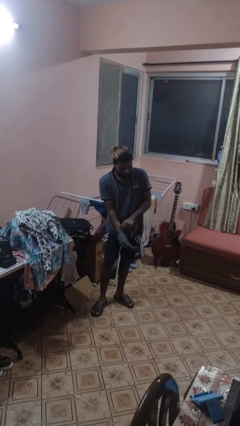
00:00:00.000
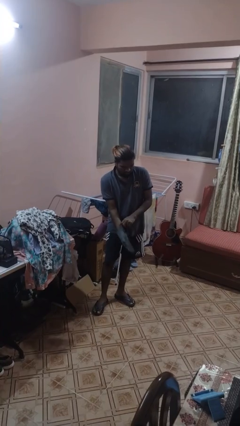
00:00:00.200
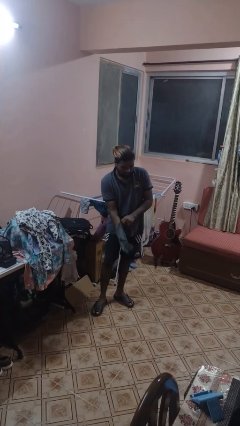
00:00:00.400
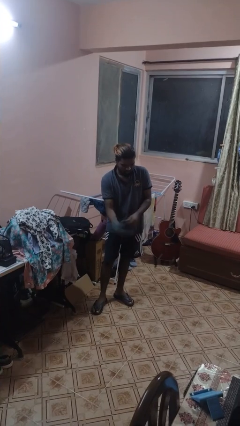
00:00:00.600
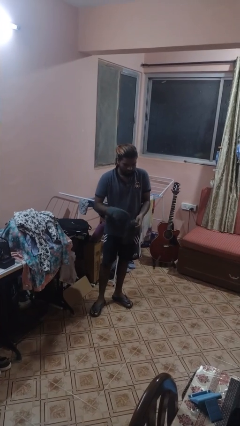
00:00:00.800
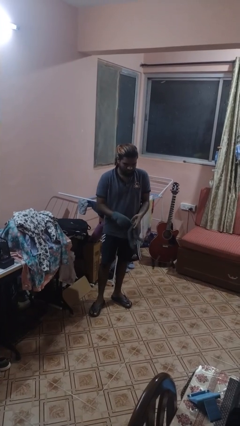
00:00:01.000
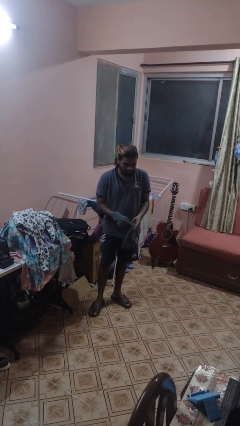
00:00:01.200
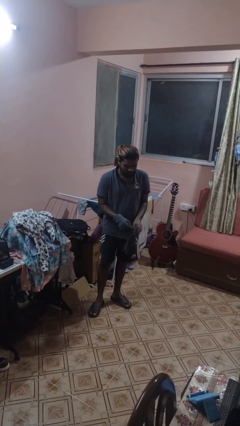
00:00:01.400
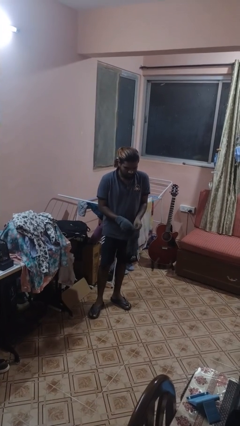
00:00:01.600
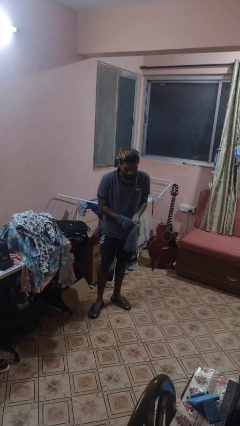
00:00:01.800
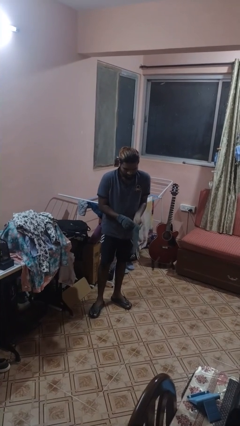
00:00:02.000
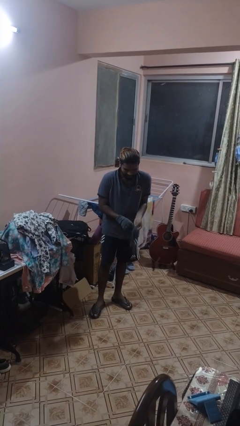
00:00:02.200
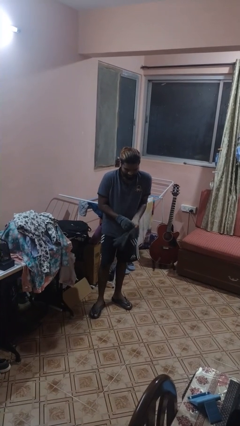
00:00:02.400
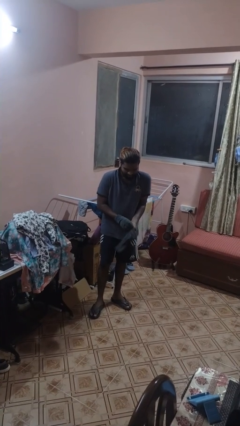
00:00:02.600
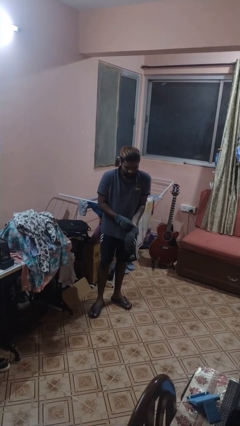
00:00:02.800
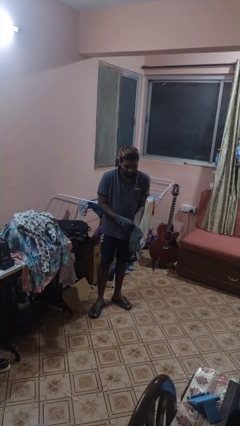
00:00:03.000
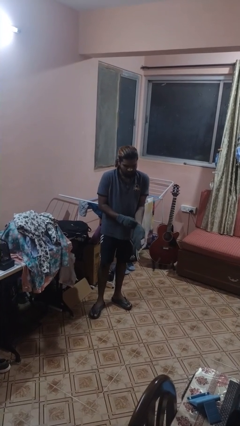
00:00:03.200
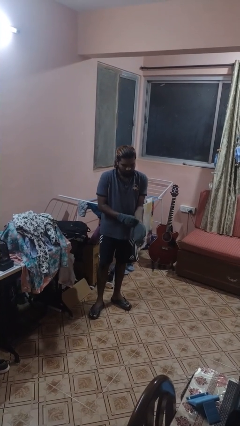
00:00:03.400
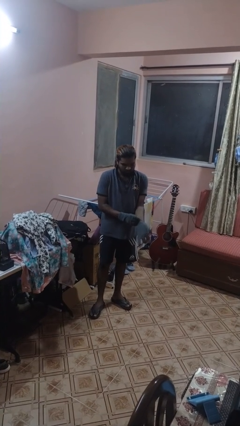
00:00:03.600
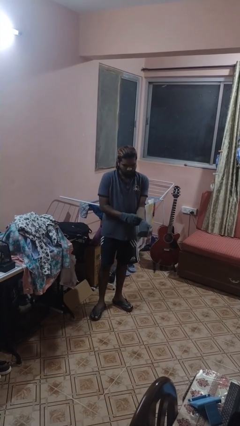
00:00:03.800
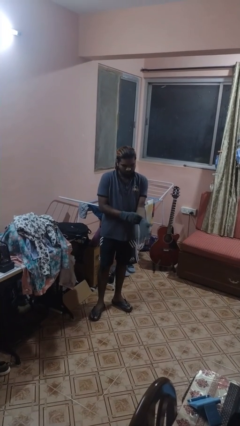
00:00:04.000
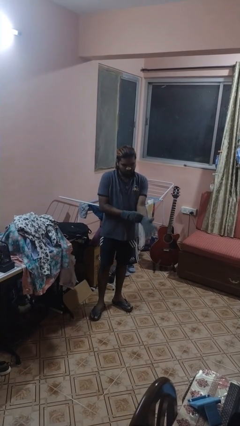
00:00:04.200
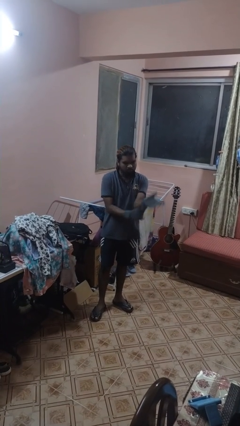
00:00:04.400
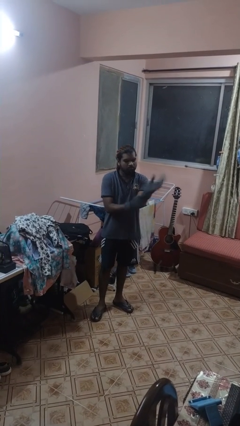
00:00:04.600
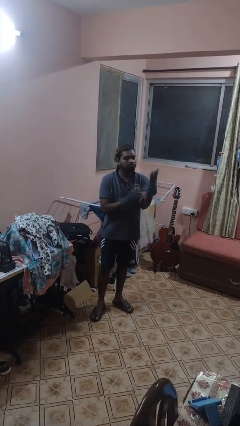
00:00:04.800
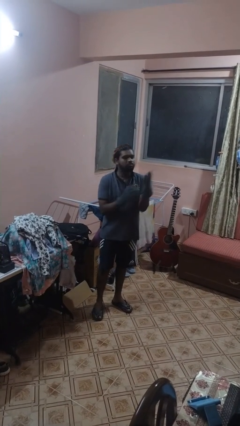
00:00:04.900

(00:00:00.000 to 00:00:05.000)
person puts on gloves

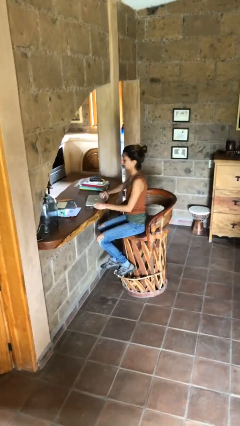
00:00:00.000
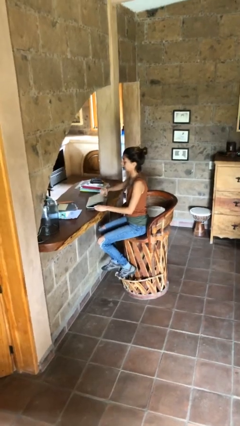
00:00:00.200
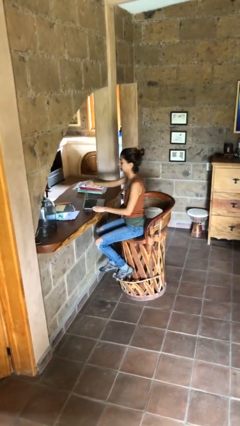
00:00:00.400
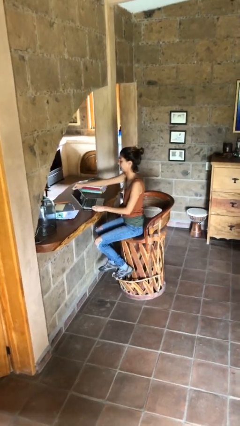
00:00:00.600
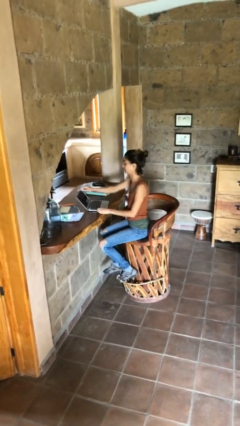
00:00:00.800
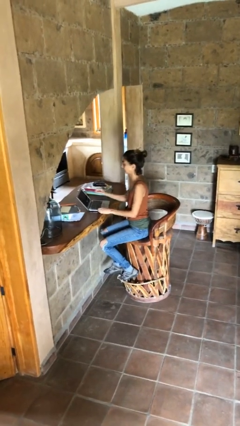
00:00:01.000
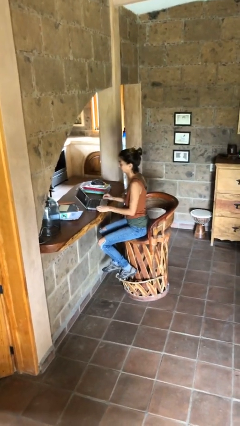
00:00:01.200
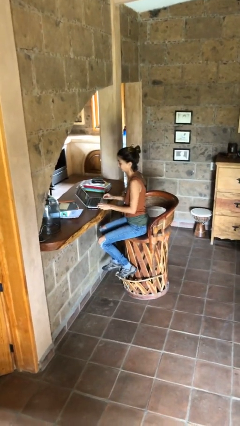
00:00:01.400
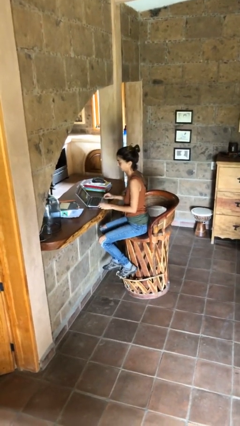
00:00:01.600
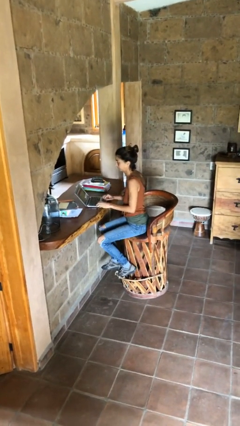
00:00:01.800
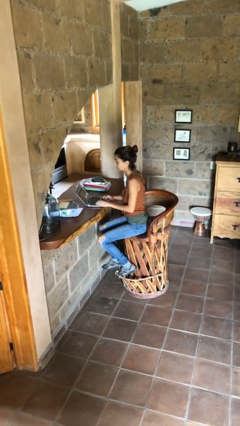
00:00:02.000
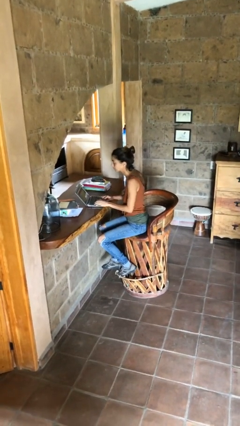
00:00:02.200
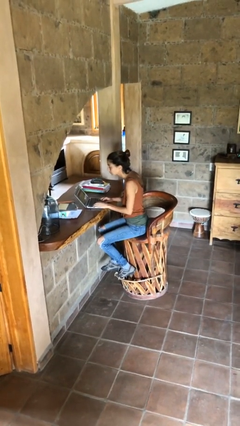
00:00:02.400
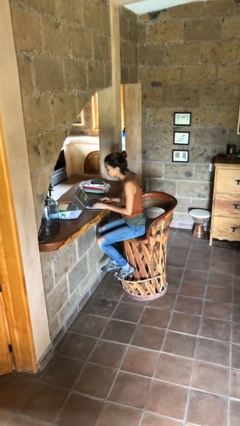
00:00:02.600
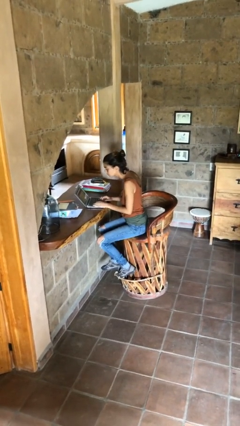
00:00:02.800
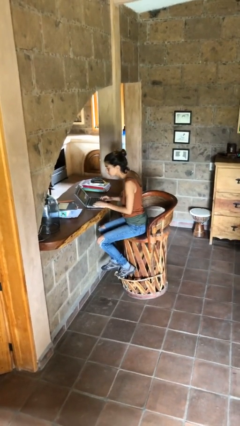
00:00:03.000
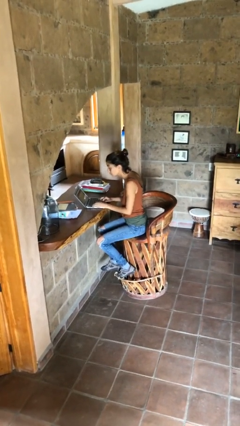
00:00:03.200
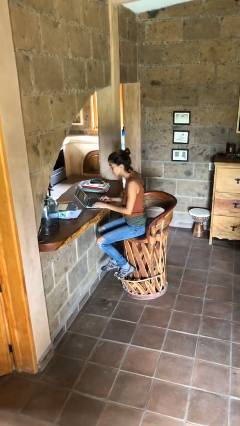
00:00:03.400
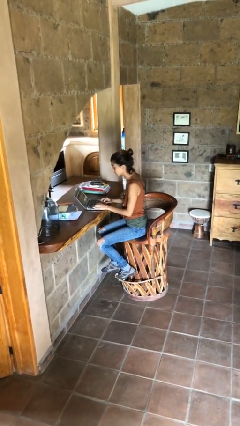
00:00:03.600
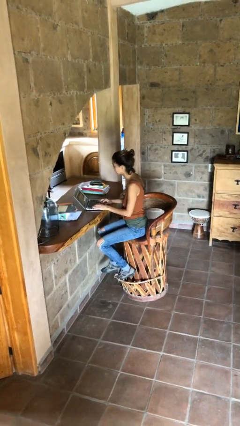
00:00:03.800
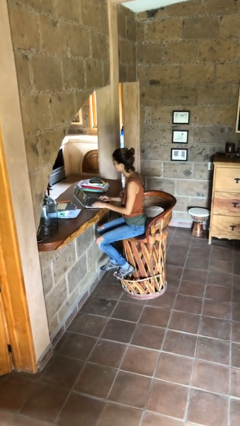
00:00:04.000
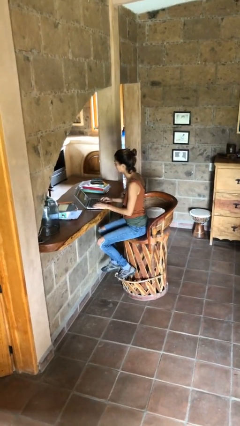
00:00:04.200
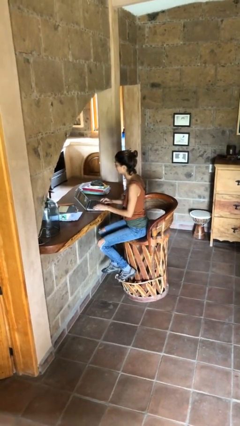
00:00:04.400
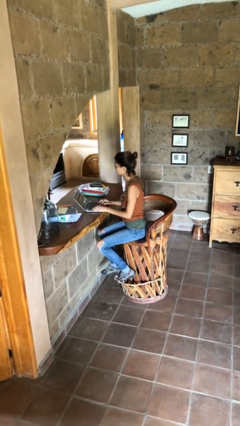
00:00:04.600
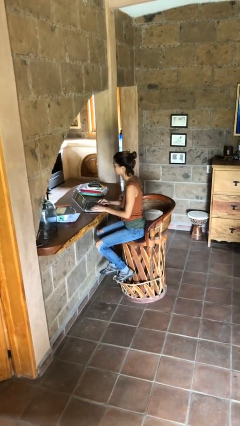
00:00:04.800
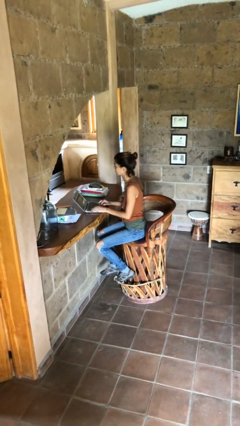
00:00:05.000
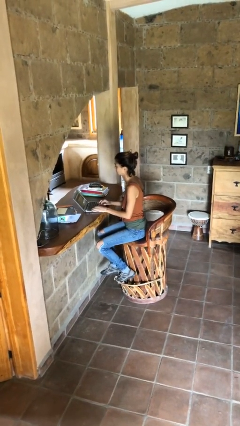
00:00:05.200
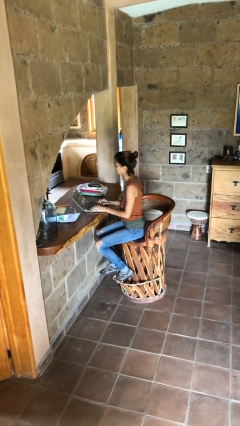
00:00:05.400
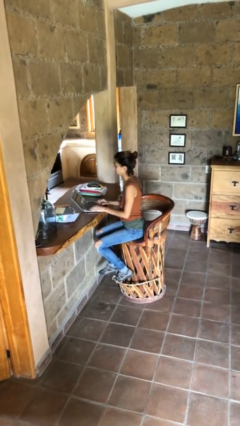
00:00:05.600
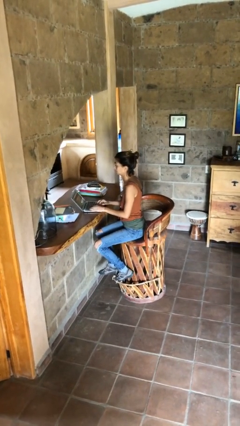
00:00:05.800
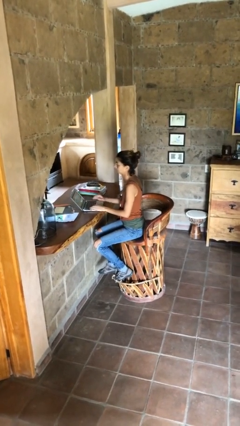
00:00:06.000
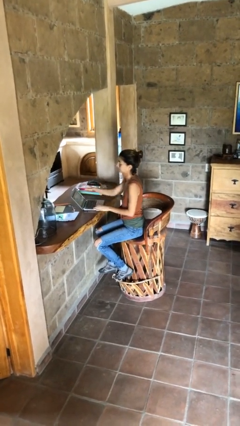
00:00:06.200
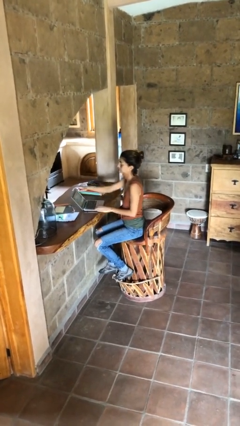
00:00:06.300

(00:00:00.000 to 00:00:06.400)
person interacts with laptop

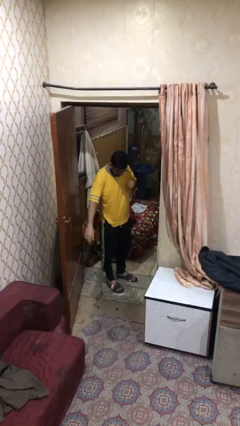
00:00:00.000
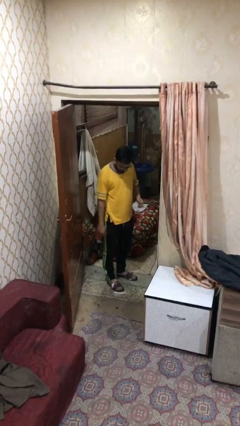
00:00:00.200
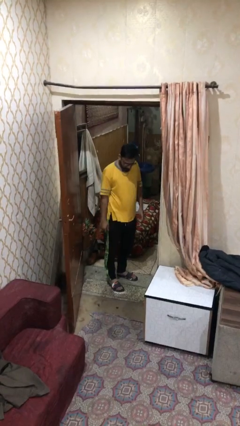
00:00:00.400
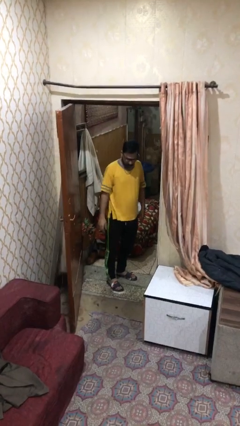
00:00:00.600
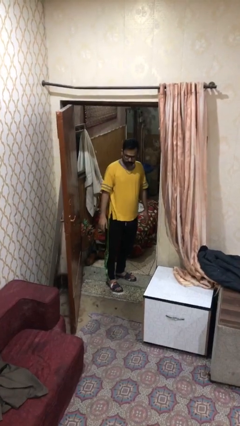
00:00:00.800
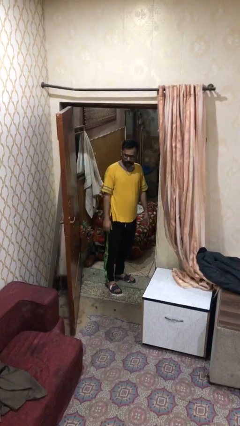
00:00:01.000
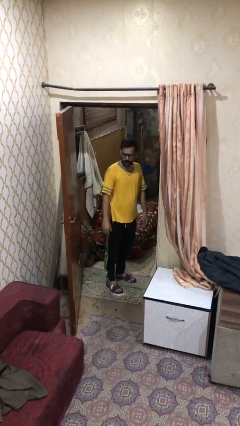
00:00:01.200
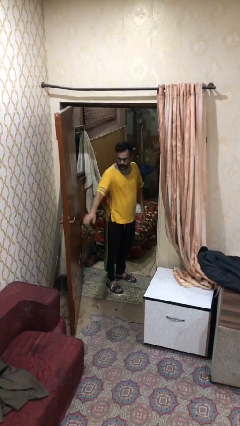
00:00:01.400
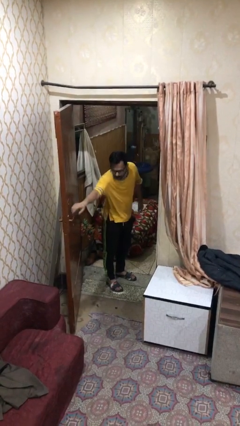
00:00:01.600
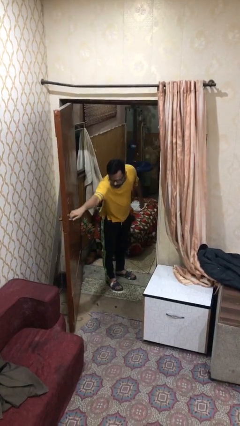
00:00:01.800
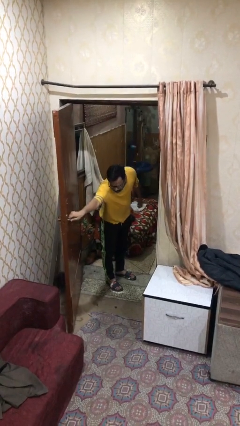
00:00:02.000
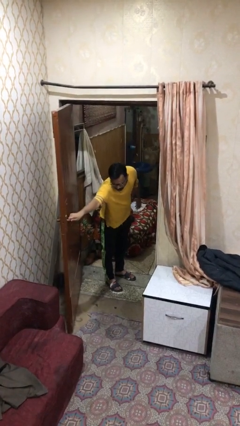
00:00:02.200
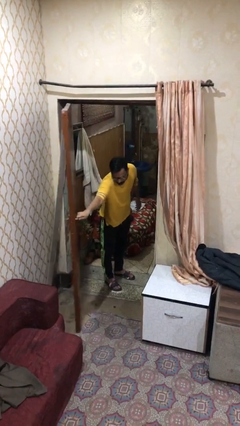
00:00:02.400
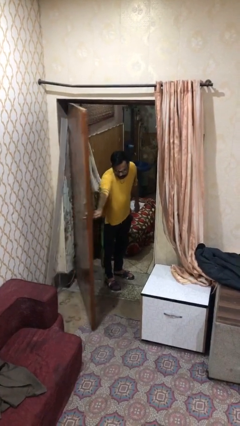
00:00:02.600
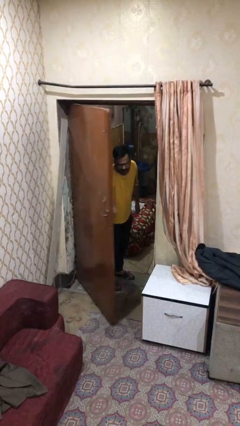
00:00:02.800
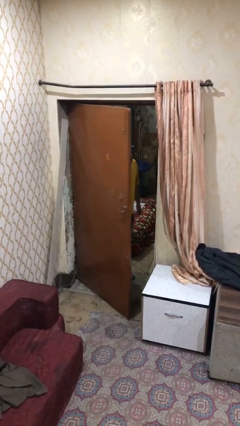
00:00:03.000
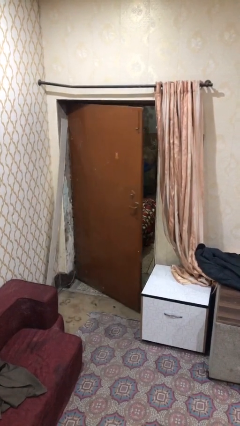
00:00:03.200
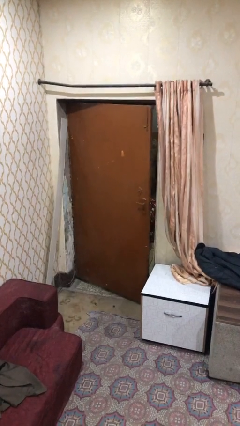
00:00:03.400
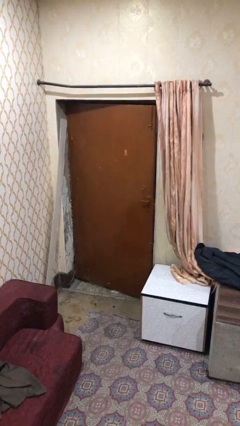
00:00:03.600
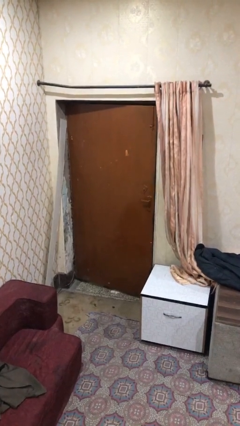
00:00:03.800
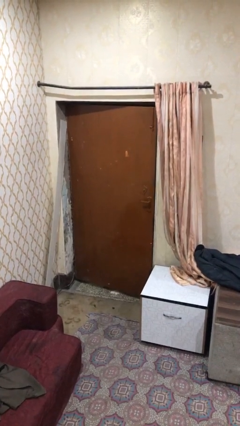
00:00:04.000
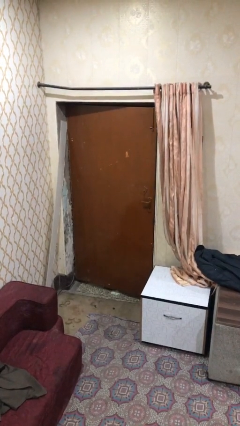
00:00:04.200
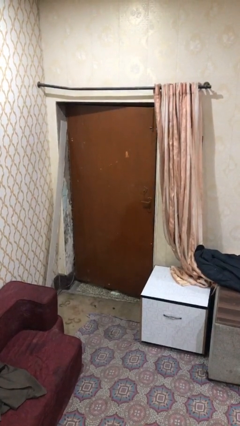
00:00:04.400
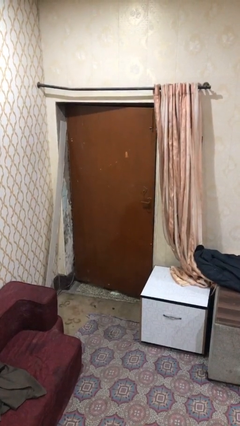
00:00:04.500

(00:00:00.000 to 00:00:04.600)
person closes facility door

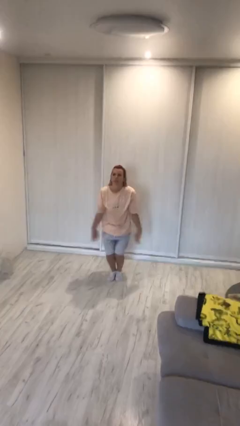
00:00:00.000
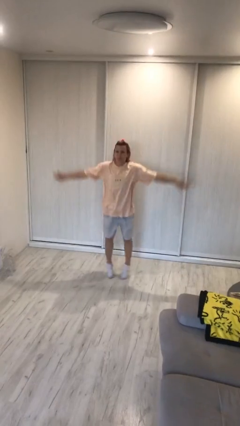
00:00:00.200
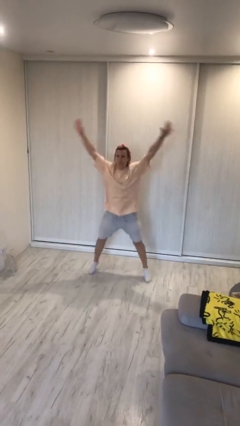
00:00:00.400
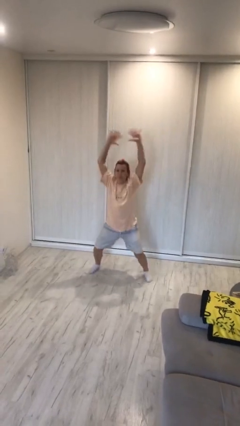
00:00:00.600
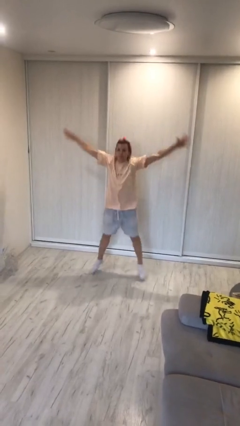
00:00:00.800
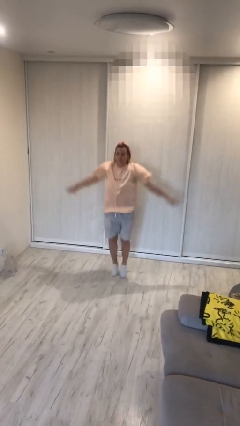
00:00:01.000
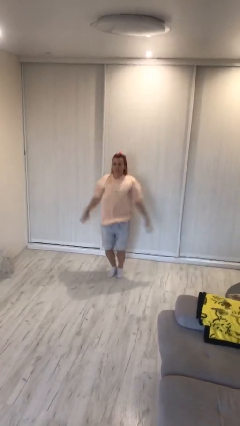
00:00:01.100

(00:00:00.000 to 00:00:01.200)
person exercises with jumping jacks

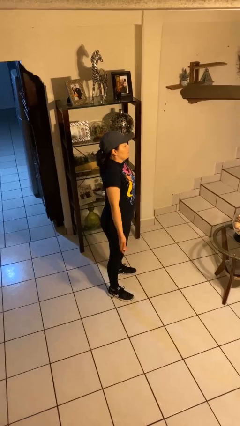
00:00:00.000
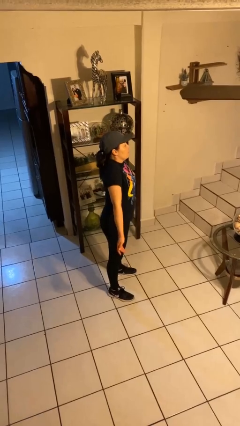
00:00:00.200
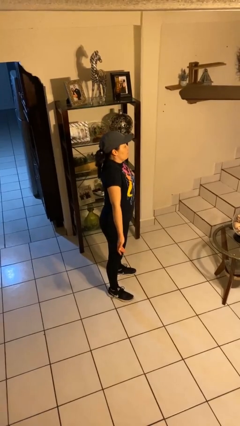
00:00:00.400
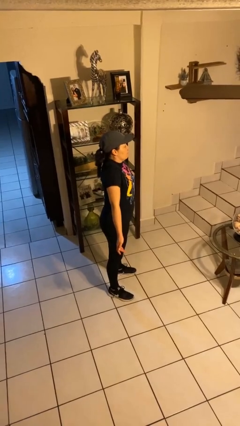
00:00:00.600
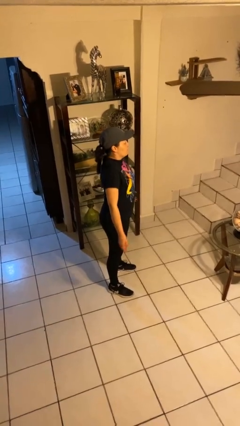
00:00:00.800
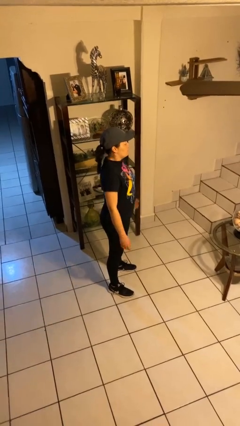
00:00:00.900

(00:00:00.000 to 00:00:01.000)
person shrugs
